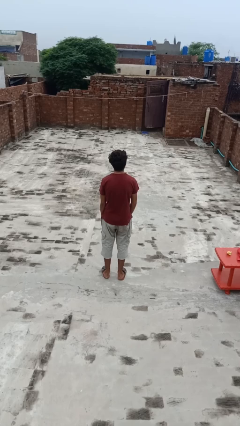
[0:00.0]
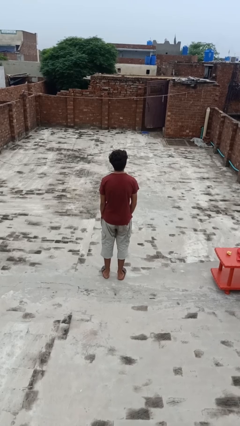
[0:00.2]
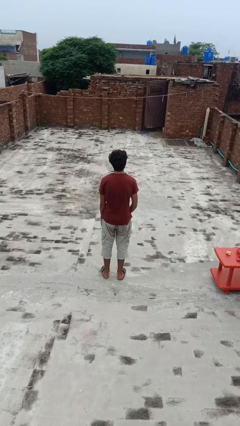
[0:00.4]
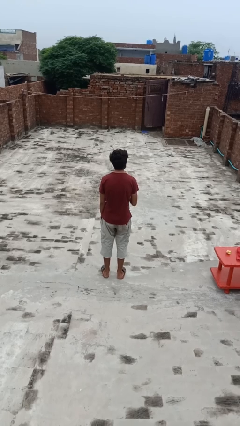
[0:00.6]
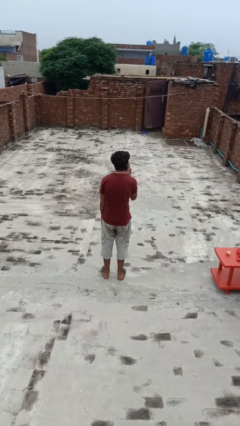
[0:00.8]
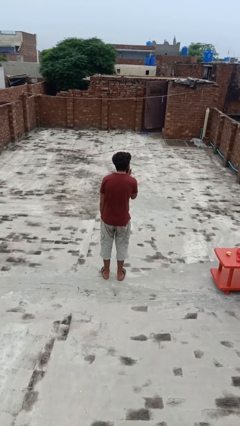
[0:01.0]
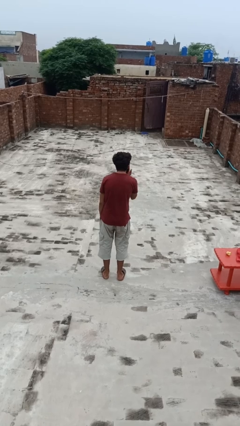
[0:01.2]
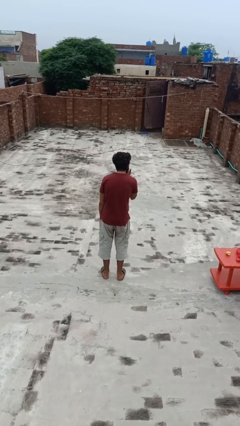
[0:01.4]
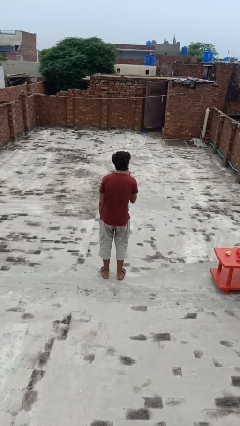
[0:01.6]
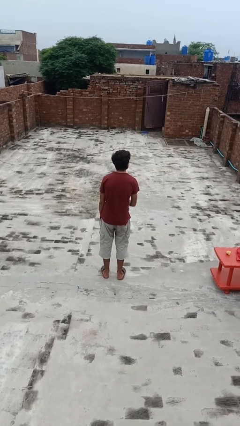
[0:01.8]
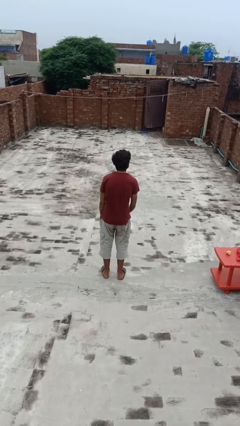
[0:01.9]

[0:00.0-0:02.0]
person gestures blow kiss

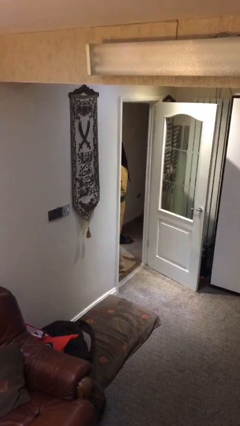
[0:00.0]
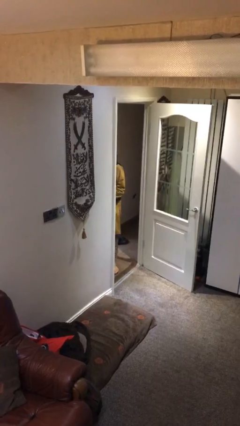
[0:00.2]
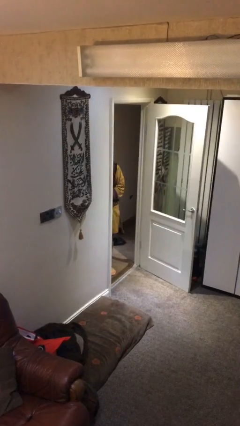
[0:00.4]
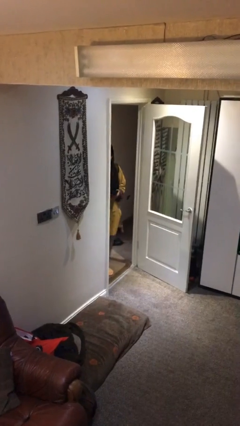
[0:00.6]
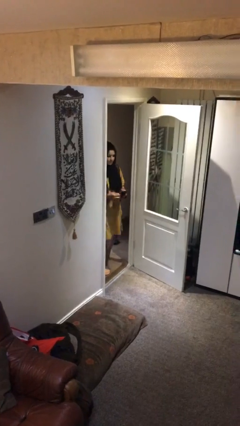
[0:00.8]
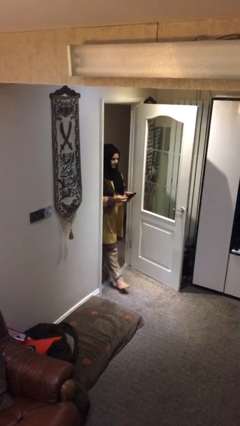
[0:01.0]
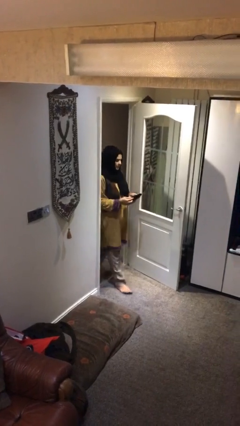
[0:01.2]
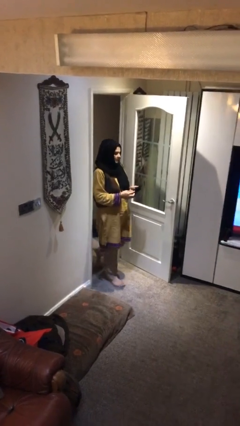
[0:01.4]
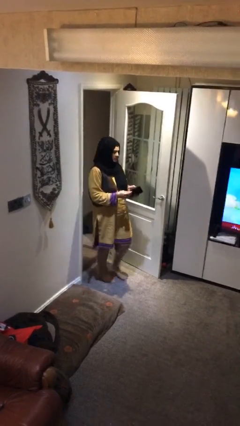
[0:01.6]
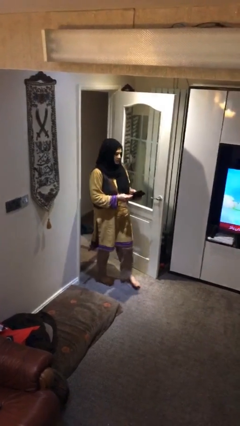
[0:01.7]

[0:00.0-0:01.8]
person enters scene through structure

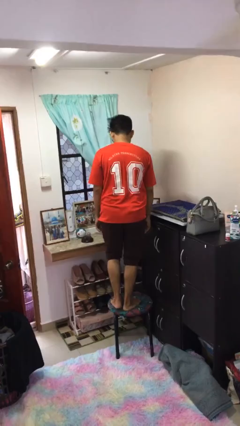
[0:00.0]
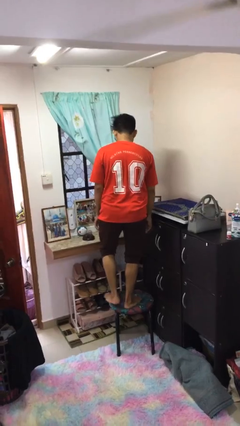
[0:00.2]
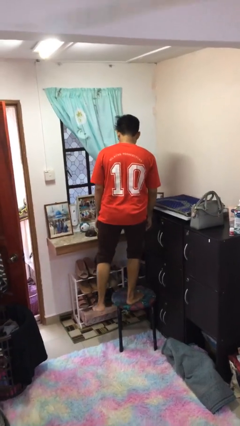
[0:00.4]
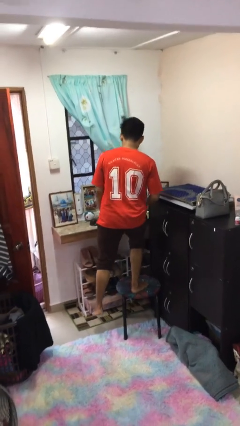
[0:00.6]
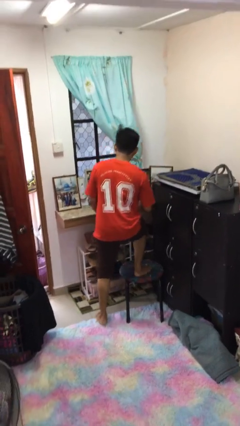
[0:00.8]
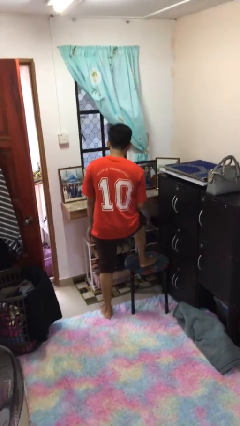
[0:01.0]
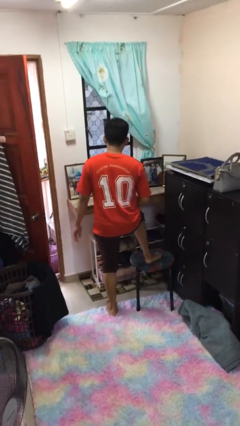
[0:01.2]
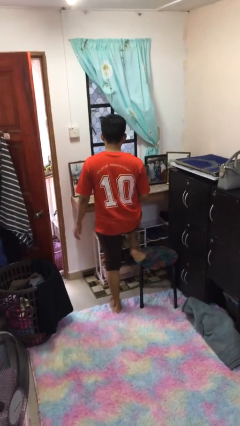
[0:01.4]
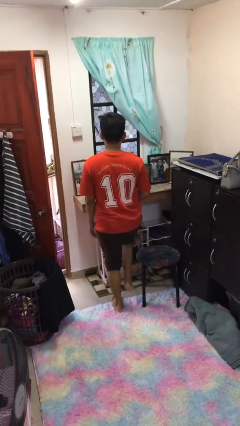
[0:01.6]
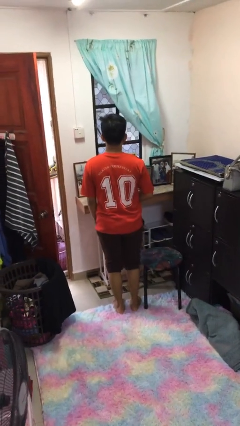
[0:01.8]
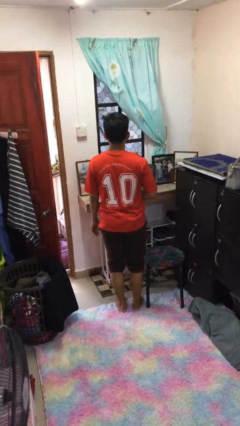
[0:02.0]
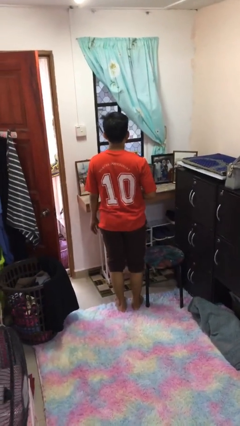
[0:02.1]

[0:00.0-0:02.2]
person climbs off chair

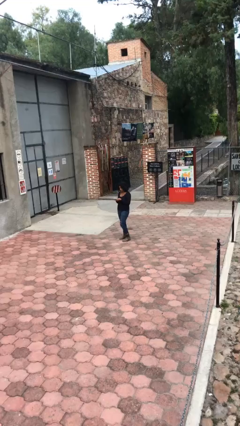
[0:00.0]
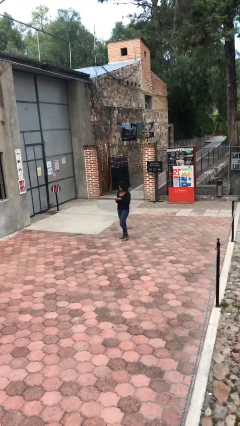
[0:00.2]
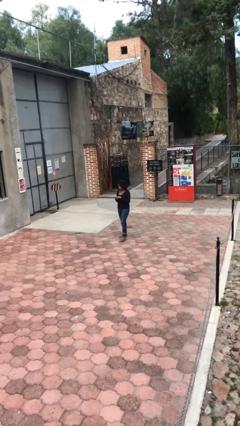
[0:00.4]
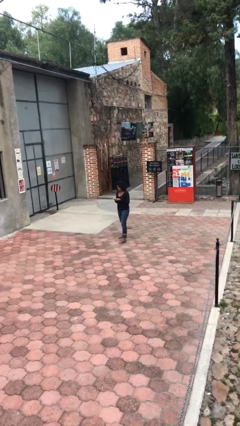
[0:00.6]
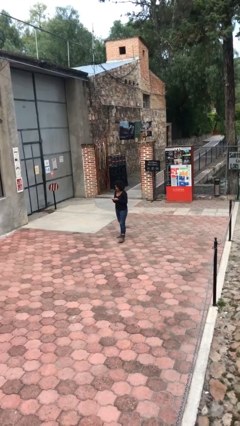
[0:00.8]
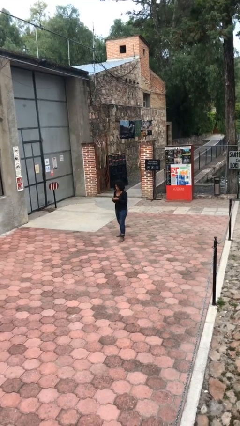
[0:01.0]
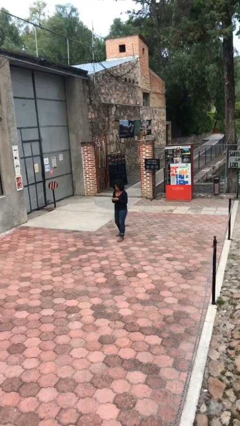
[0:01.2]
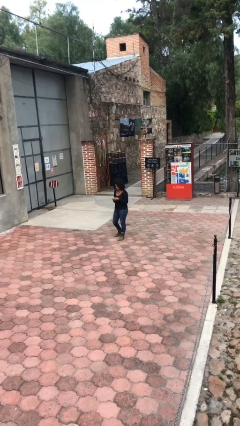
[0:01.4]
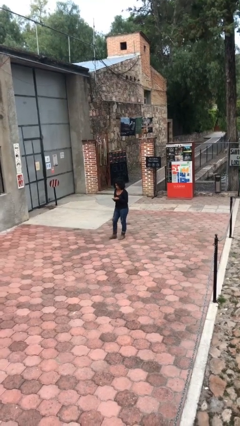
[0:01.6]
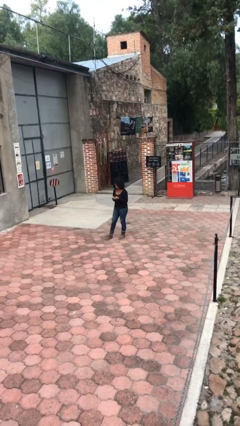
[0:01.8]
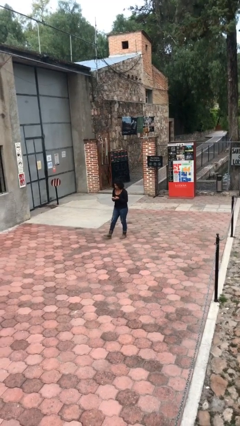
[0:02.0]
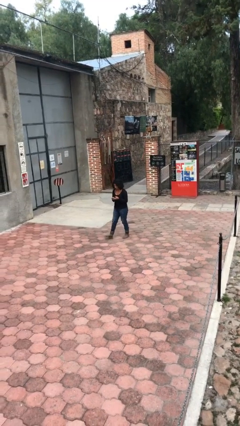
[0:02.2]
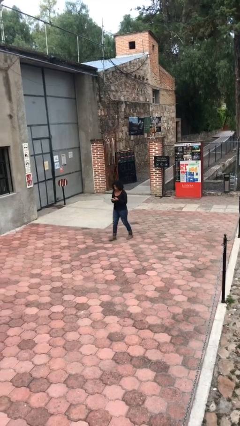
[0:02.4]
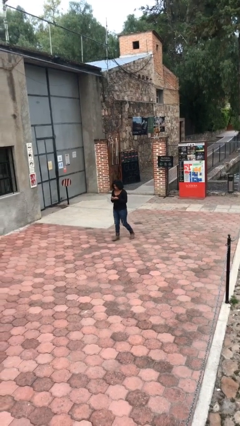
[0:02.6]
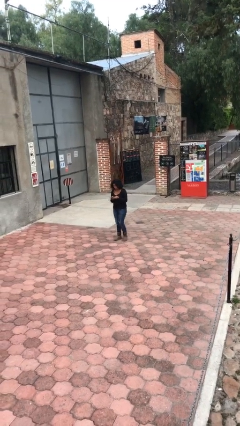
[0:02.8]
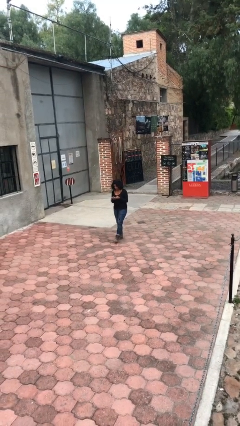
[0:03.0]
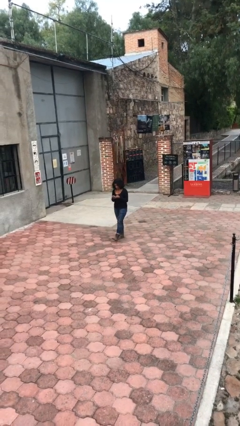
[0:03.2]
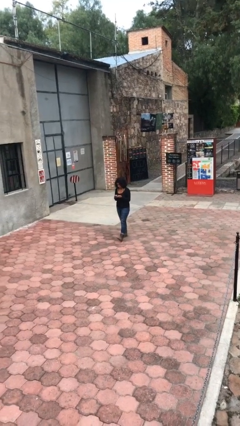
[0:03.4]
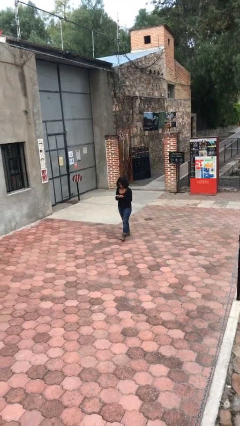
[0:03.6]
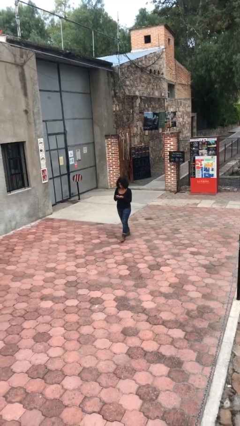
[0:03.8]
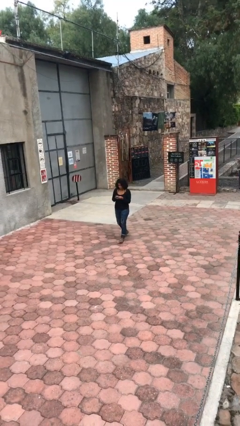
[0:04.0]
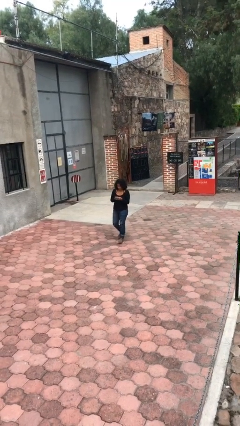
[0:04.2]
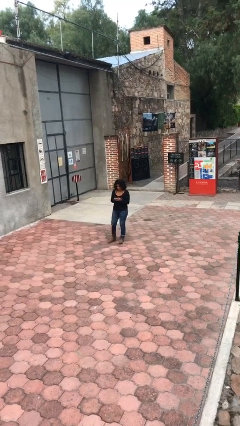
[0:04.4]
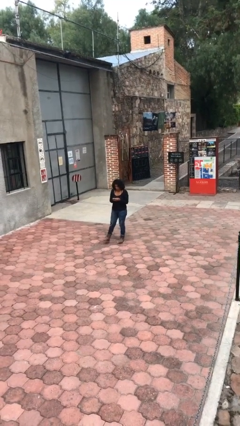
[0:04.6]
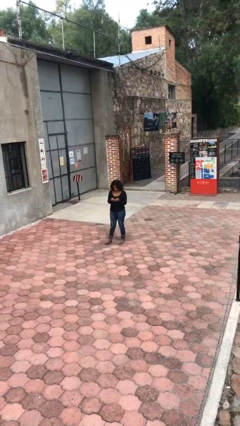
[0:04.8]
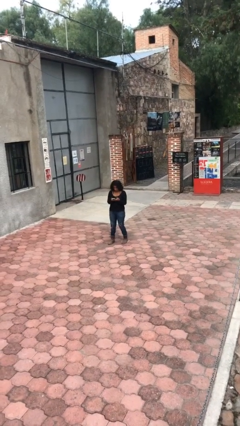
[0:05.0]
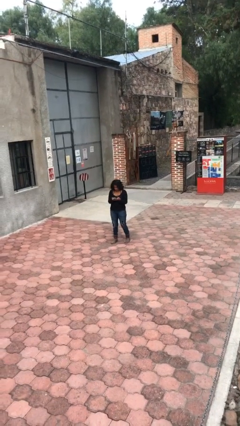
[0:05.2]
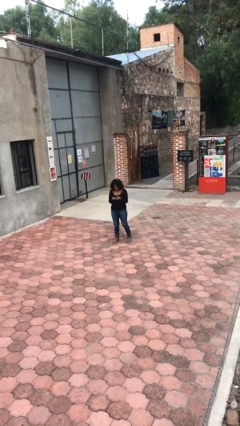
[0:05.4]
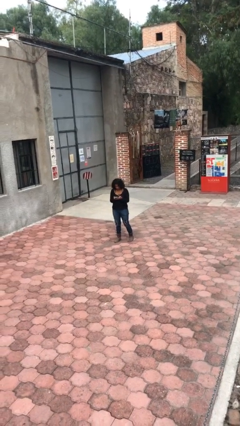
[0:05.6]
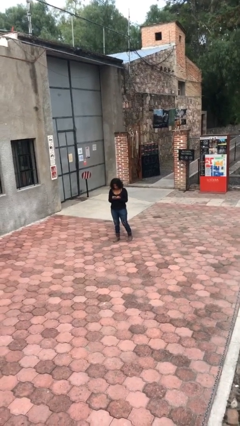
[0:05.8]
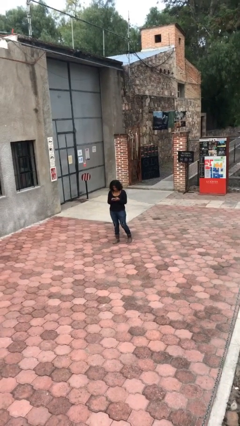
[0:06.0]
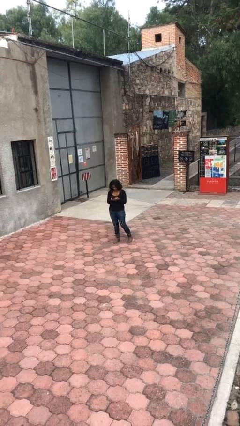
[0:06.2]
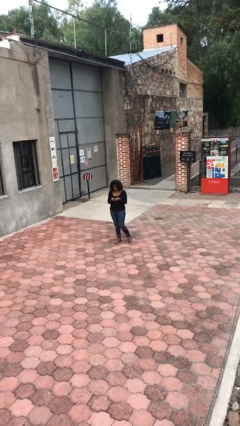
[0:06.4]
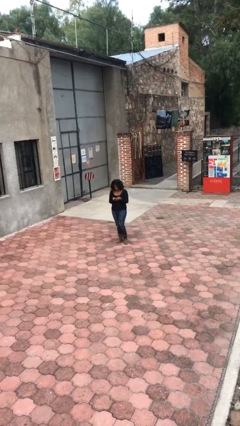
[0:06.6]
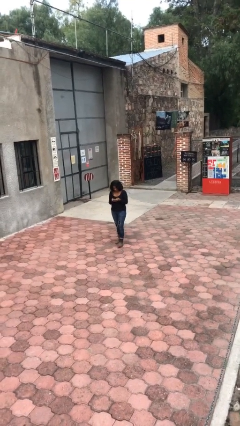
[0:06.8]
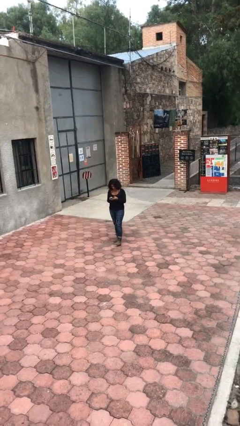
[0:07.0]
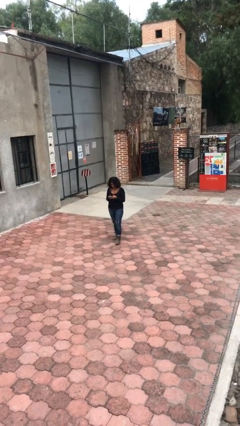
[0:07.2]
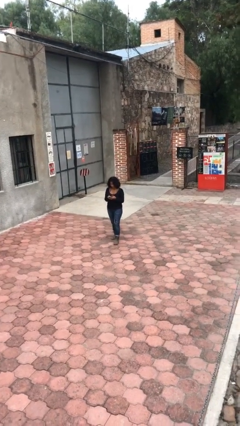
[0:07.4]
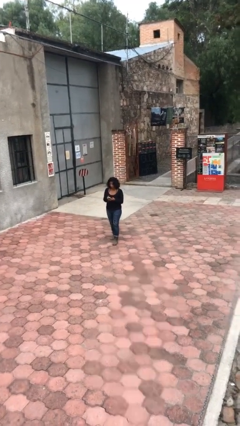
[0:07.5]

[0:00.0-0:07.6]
person texts on phone

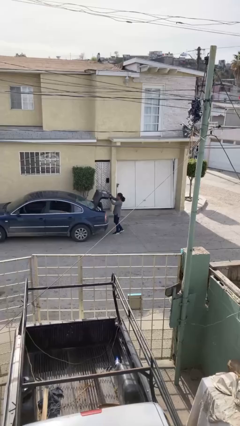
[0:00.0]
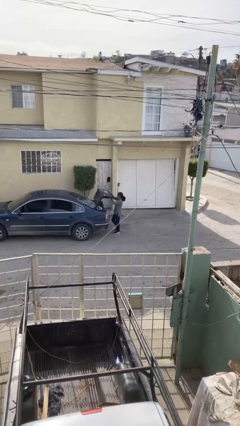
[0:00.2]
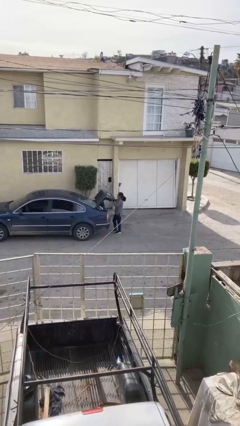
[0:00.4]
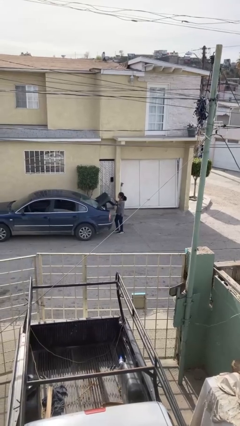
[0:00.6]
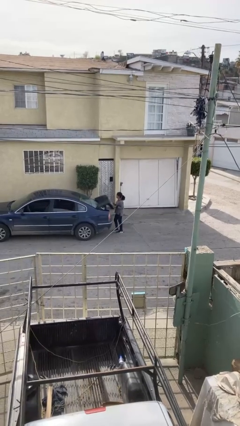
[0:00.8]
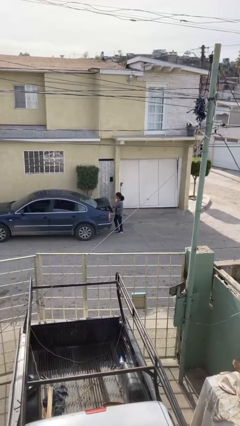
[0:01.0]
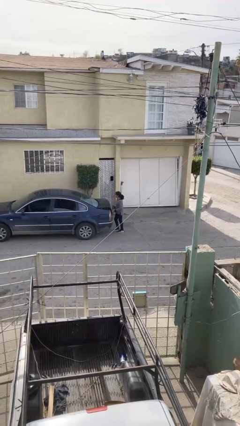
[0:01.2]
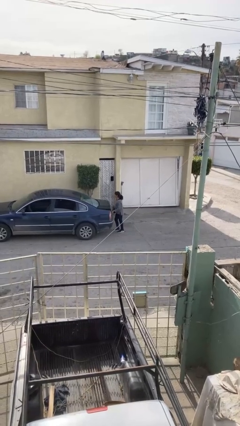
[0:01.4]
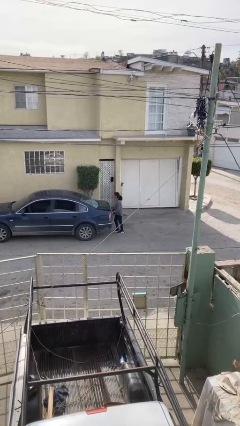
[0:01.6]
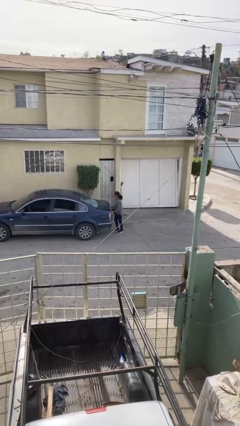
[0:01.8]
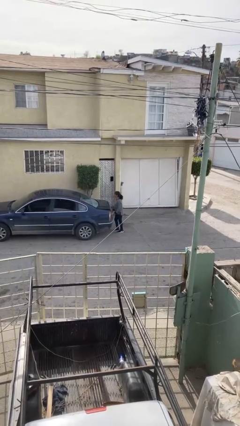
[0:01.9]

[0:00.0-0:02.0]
person closes car trunk

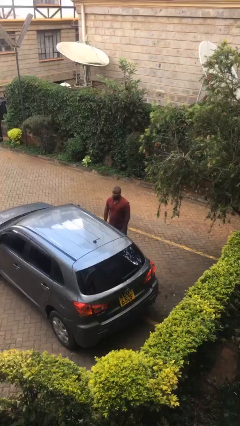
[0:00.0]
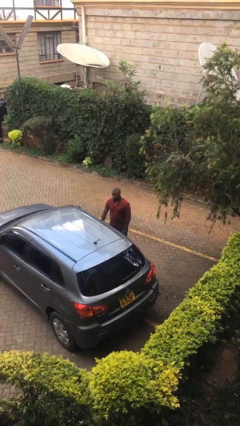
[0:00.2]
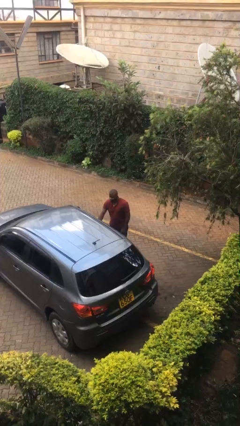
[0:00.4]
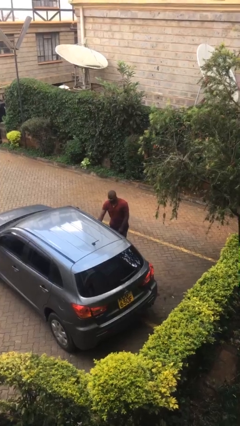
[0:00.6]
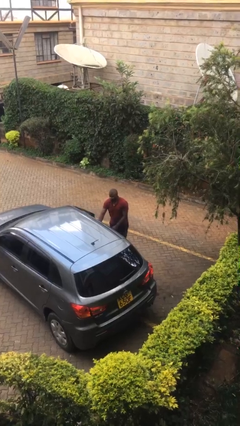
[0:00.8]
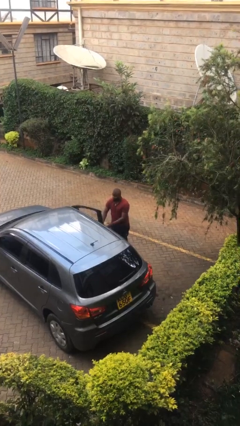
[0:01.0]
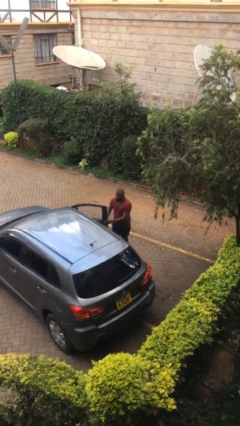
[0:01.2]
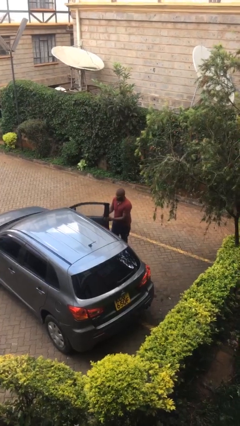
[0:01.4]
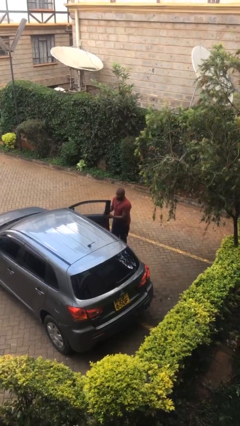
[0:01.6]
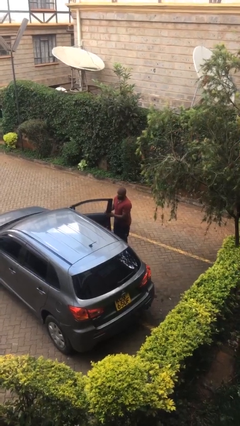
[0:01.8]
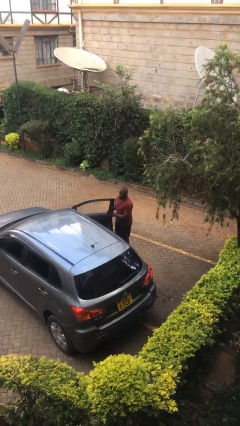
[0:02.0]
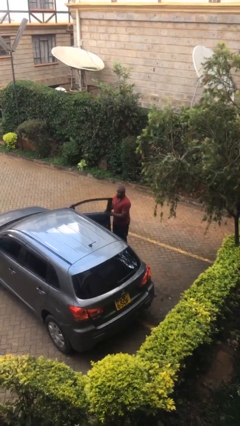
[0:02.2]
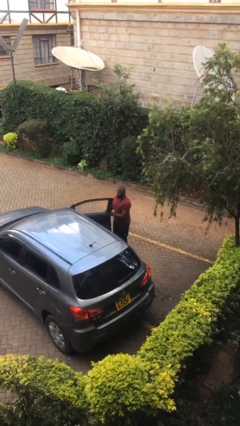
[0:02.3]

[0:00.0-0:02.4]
person opens car door

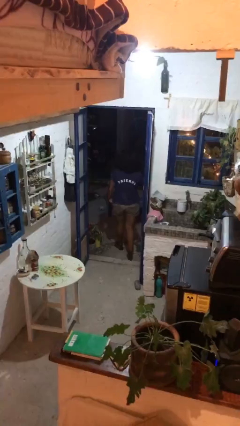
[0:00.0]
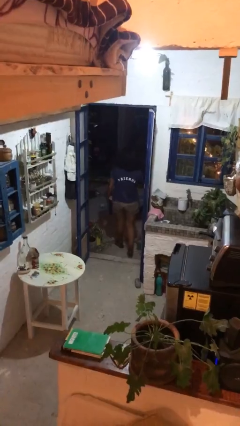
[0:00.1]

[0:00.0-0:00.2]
person exits scene through structure
